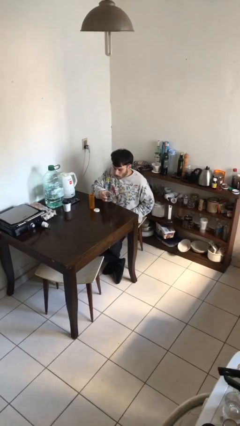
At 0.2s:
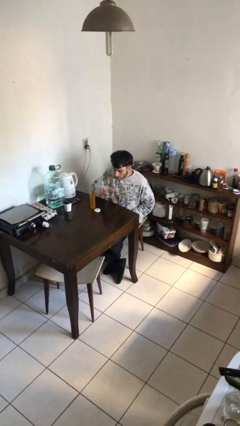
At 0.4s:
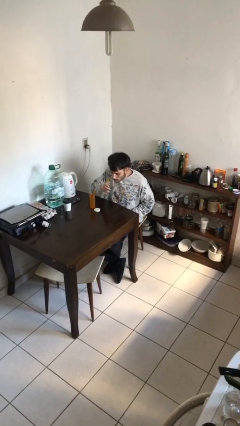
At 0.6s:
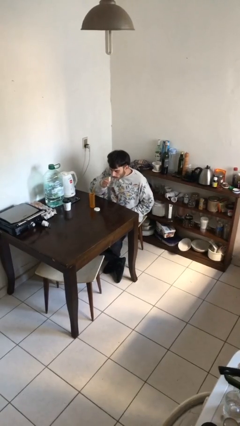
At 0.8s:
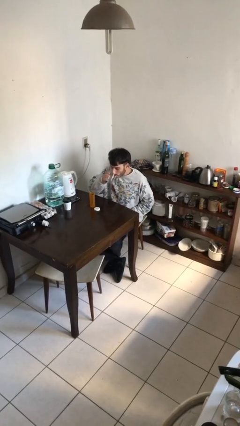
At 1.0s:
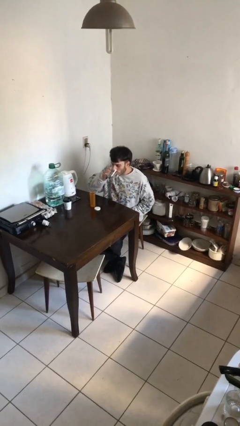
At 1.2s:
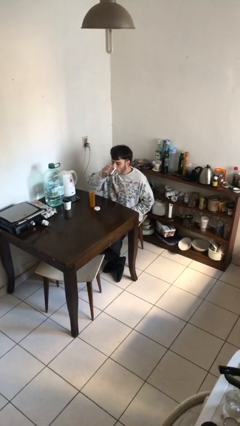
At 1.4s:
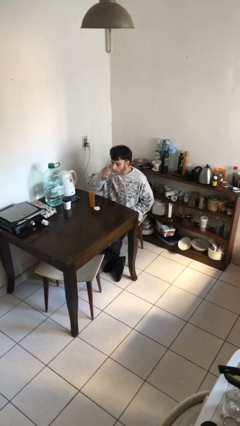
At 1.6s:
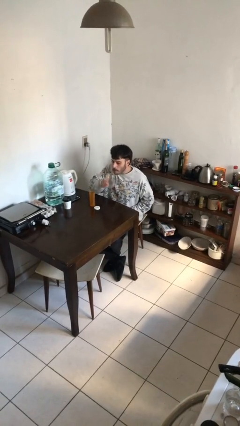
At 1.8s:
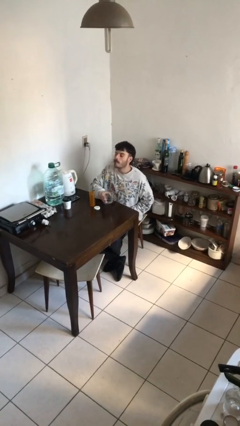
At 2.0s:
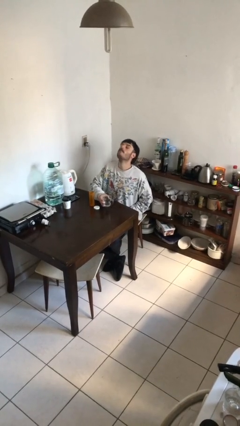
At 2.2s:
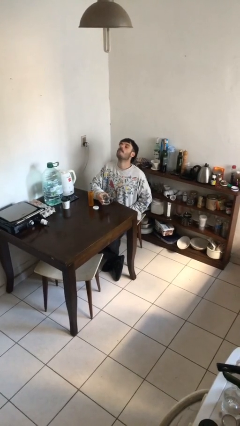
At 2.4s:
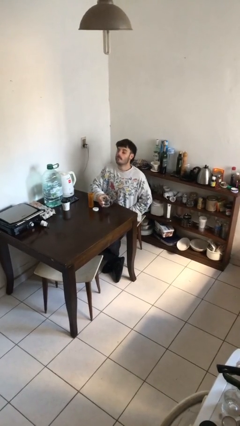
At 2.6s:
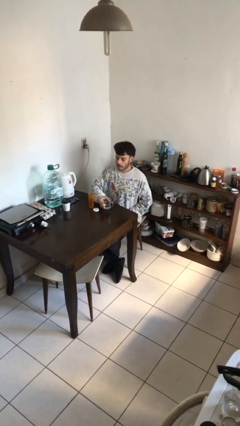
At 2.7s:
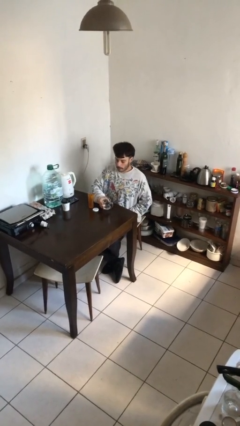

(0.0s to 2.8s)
person drinks from cup

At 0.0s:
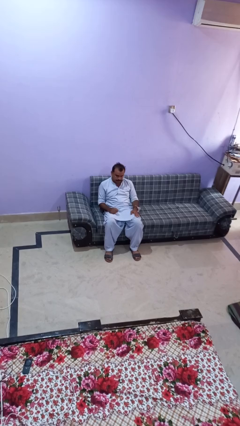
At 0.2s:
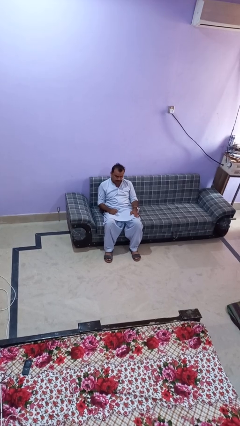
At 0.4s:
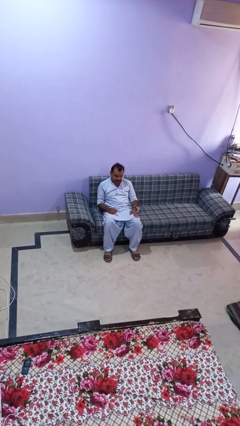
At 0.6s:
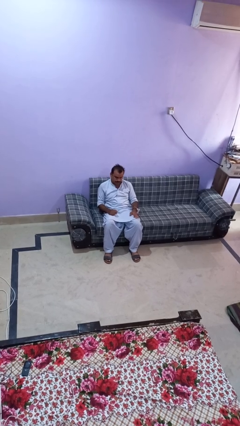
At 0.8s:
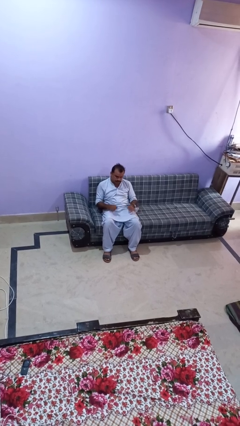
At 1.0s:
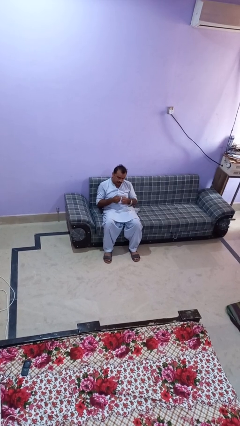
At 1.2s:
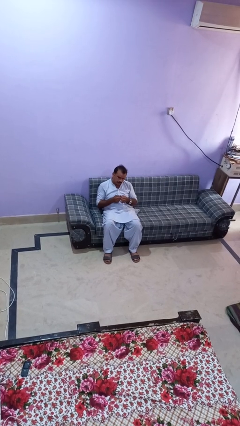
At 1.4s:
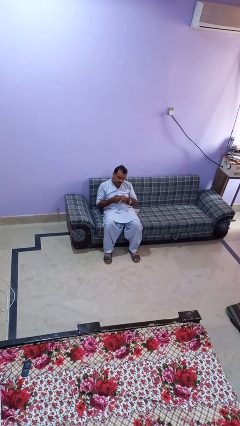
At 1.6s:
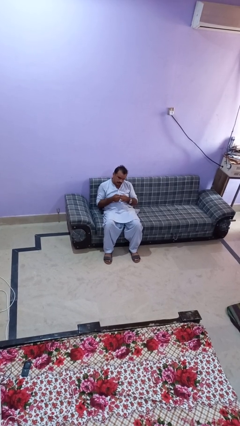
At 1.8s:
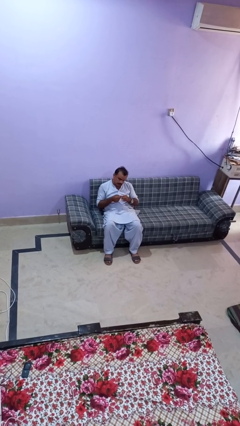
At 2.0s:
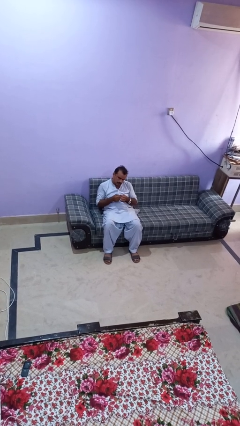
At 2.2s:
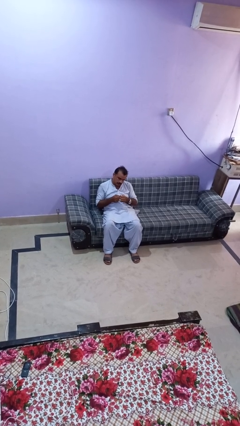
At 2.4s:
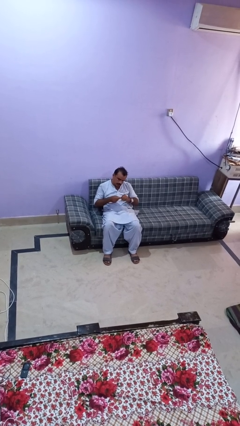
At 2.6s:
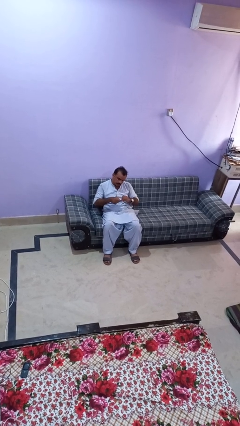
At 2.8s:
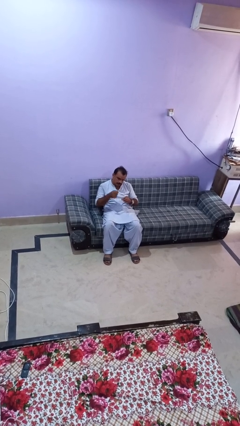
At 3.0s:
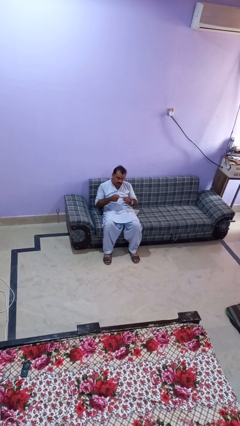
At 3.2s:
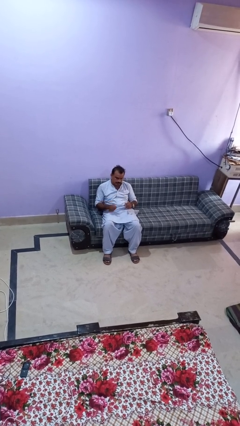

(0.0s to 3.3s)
person files fingernails

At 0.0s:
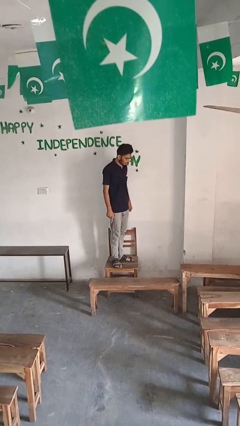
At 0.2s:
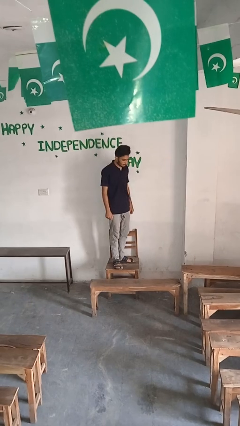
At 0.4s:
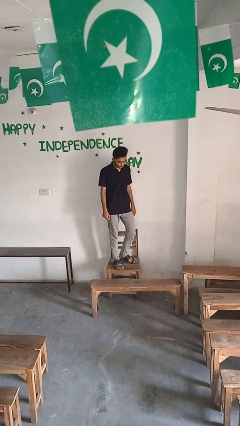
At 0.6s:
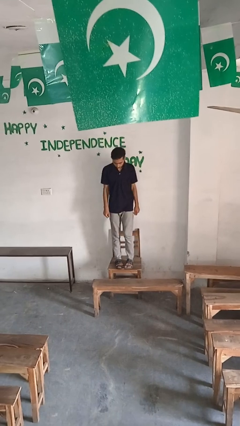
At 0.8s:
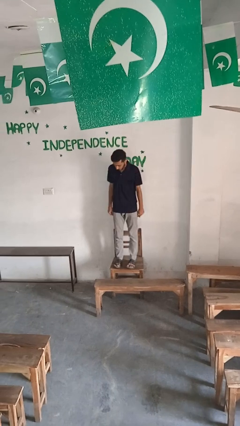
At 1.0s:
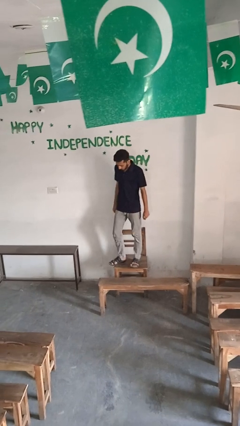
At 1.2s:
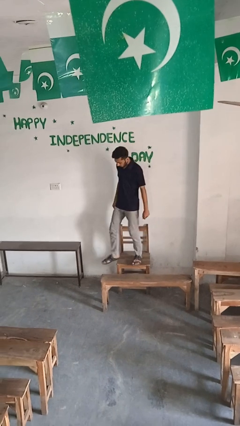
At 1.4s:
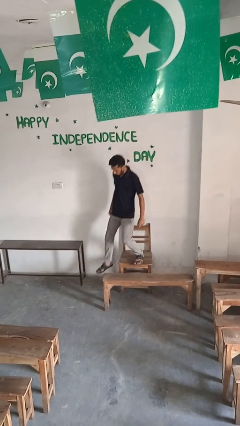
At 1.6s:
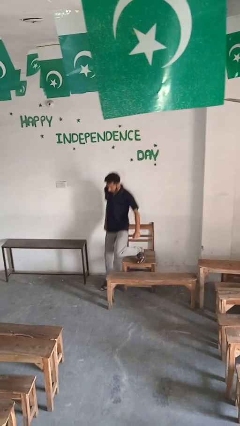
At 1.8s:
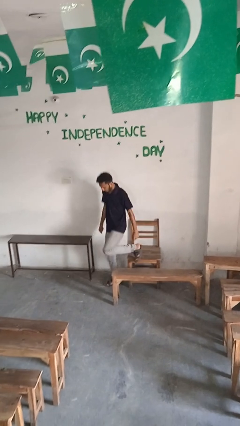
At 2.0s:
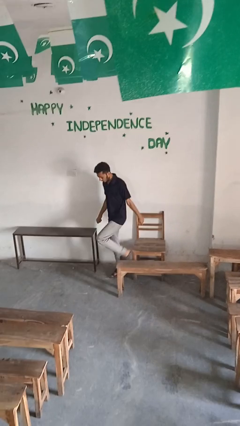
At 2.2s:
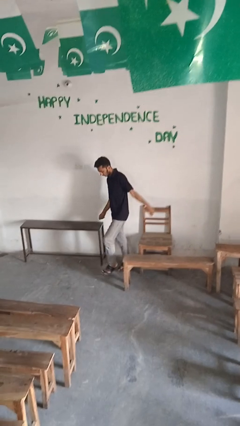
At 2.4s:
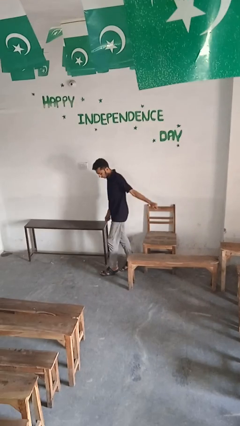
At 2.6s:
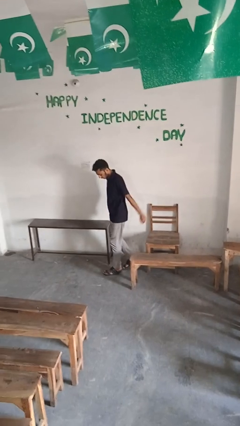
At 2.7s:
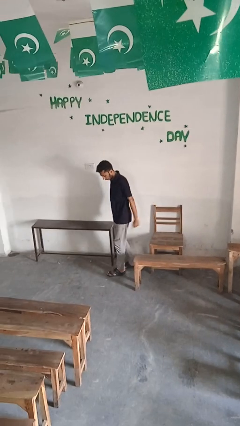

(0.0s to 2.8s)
person climbs off chair

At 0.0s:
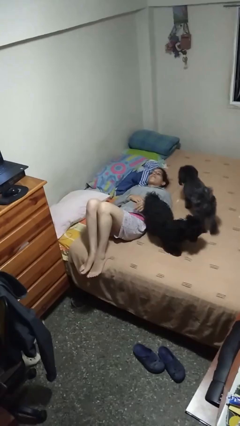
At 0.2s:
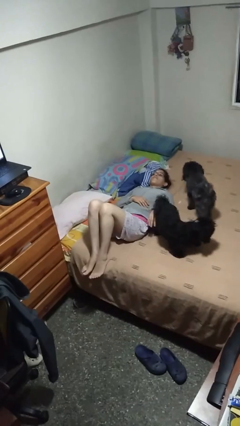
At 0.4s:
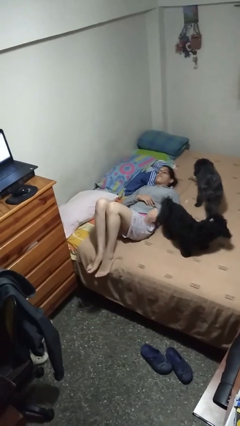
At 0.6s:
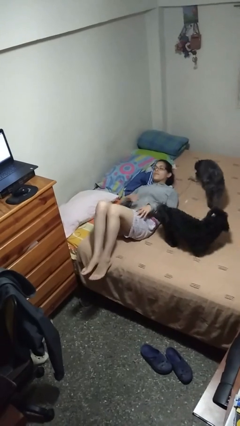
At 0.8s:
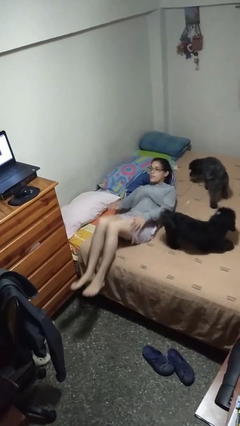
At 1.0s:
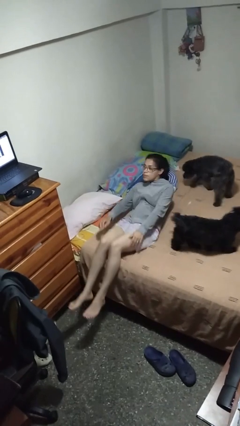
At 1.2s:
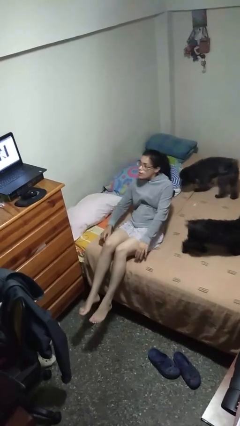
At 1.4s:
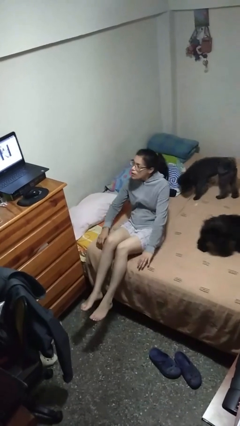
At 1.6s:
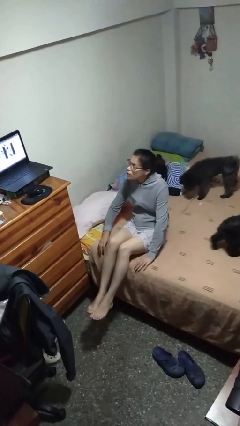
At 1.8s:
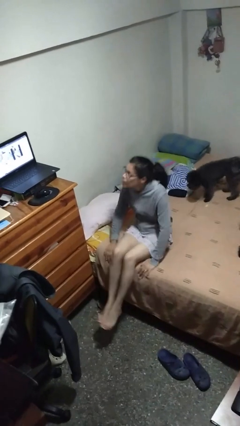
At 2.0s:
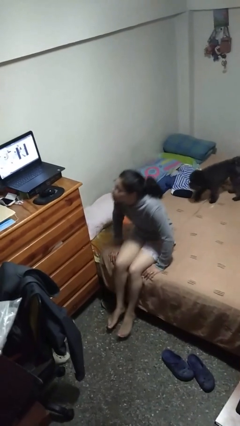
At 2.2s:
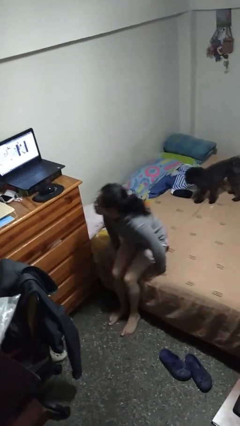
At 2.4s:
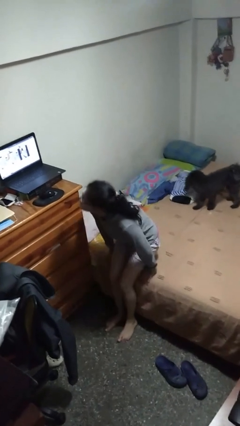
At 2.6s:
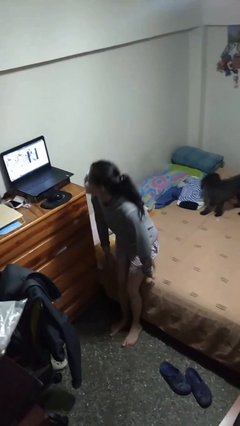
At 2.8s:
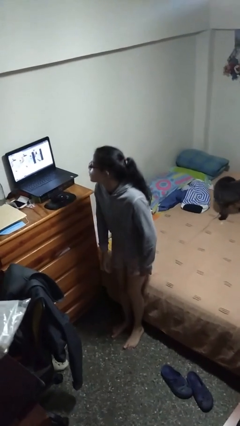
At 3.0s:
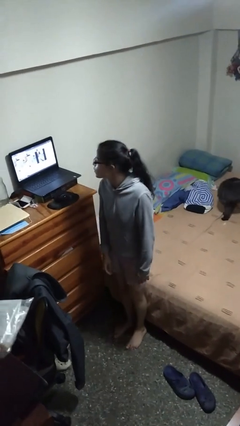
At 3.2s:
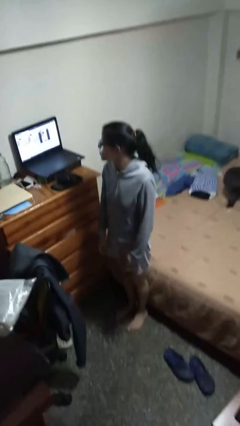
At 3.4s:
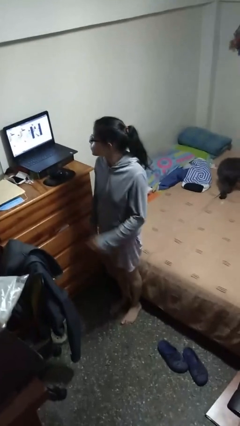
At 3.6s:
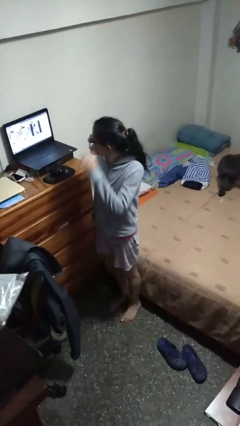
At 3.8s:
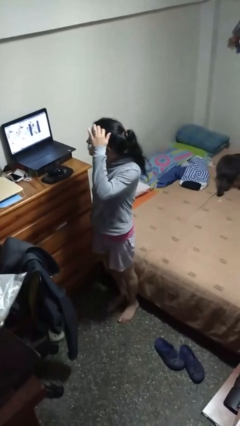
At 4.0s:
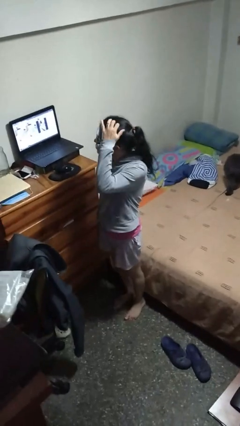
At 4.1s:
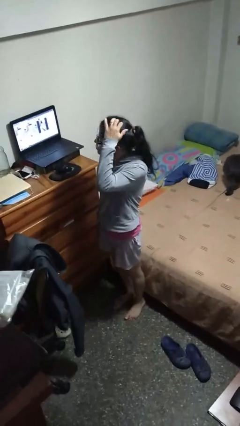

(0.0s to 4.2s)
person stands up

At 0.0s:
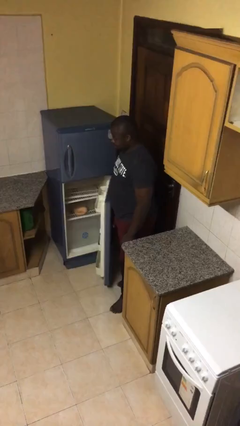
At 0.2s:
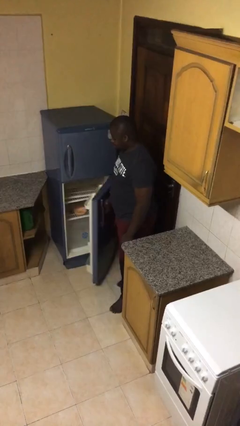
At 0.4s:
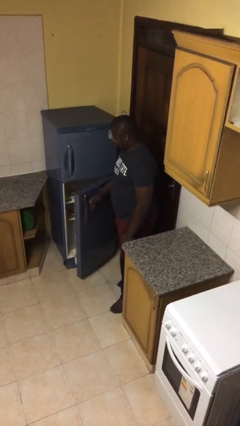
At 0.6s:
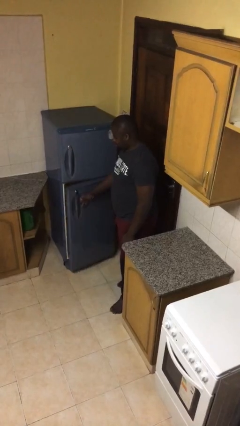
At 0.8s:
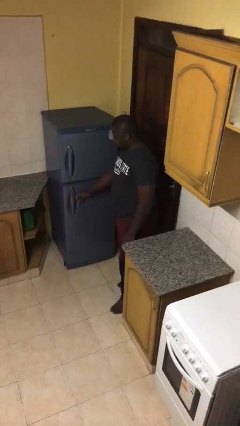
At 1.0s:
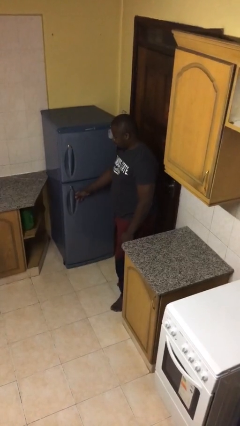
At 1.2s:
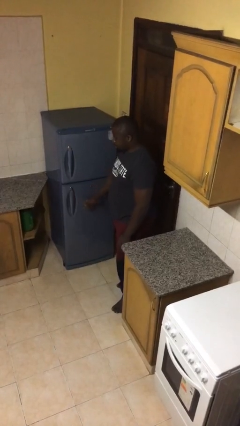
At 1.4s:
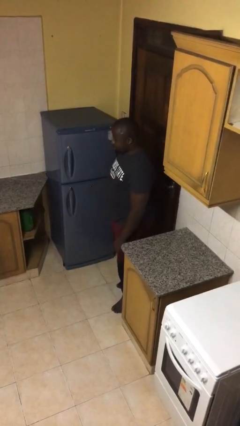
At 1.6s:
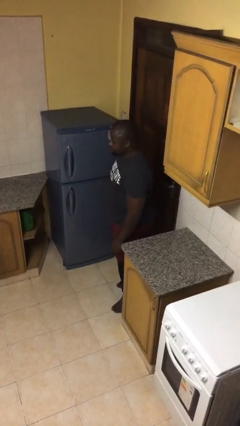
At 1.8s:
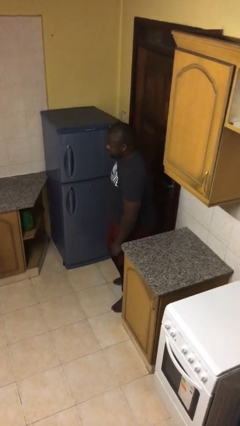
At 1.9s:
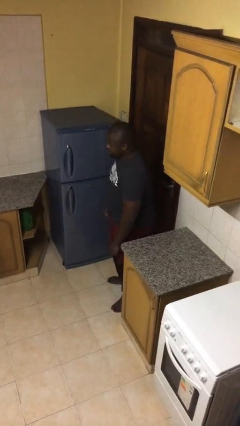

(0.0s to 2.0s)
person closes refrigerator

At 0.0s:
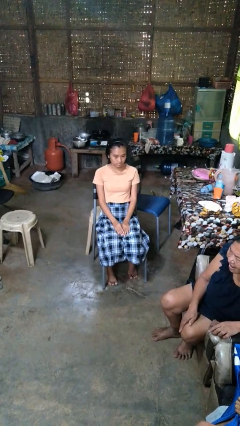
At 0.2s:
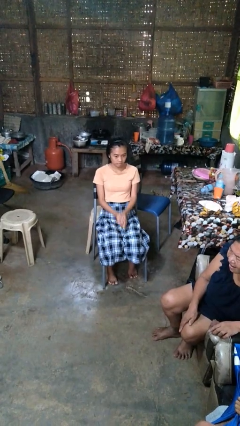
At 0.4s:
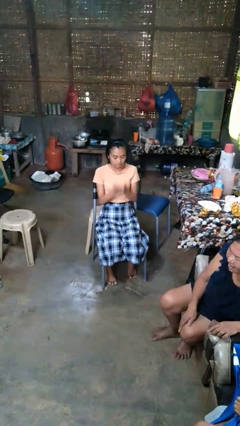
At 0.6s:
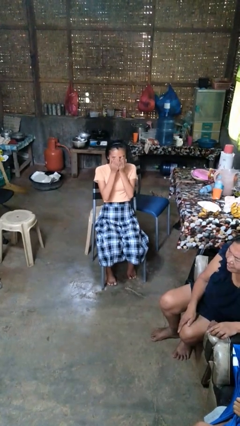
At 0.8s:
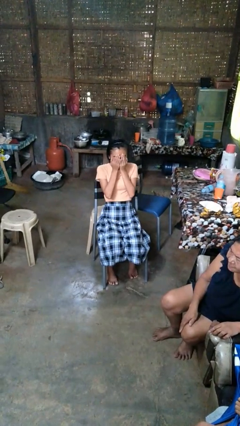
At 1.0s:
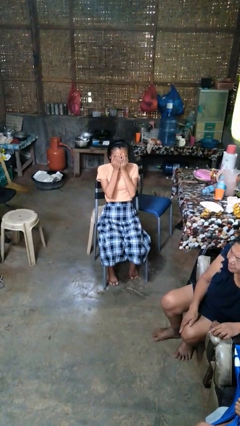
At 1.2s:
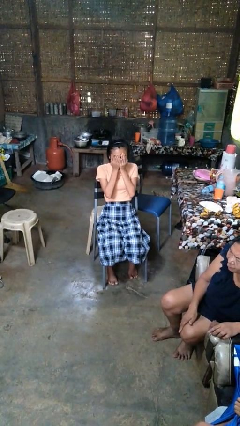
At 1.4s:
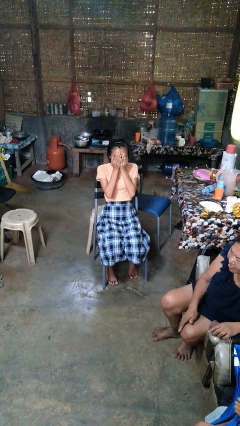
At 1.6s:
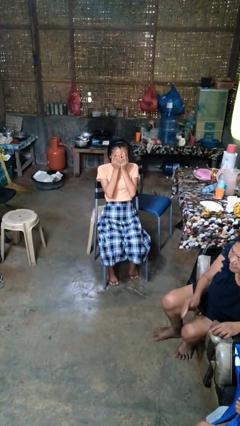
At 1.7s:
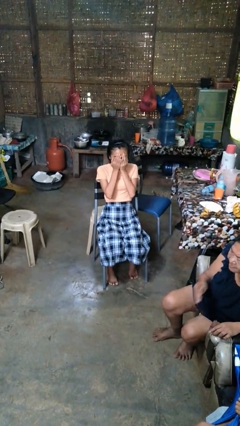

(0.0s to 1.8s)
person covers face with hands

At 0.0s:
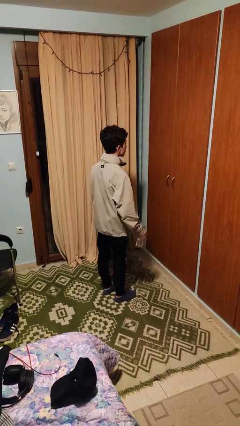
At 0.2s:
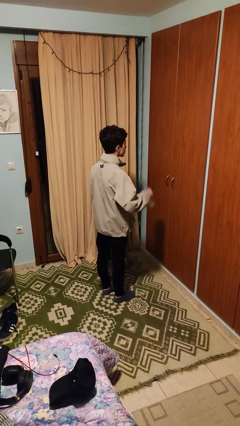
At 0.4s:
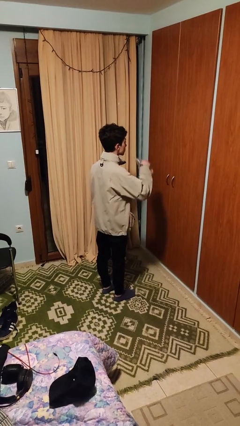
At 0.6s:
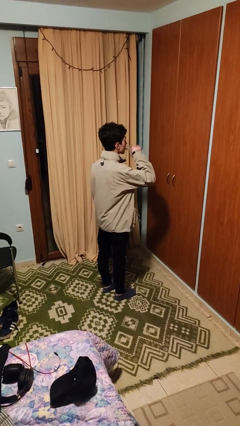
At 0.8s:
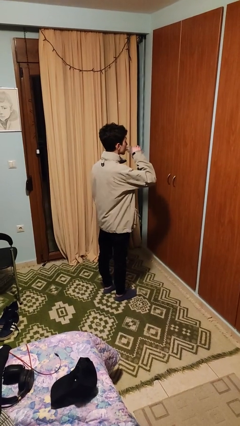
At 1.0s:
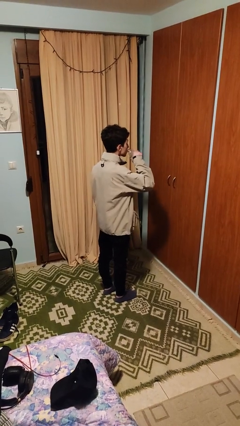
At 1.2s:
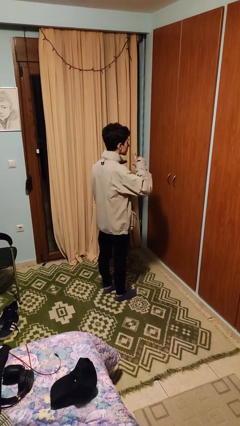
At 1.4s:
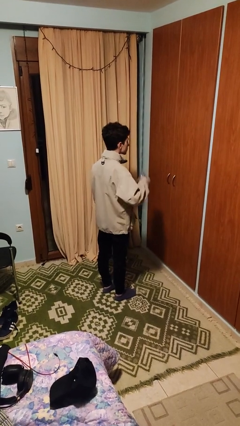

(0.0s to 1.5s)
person drinks from bottle
